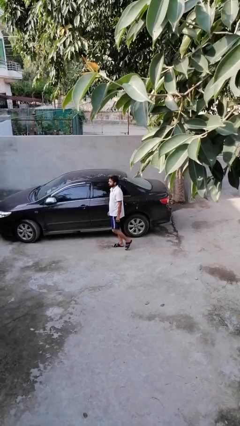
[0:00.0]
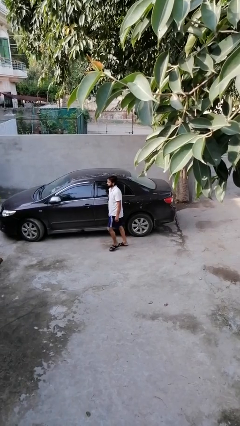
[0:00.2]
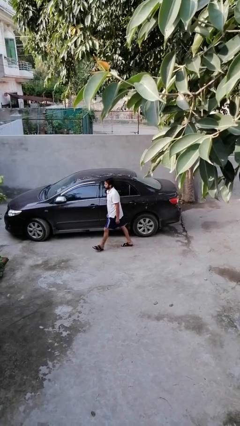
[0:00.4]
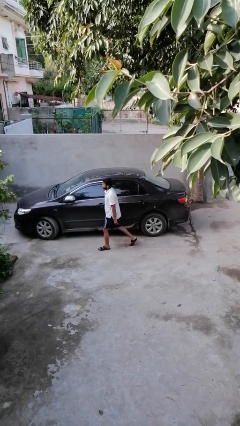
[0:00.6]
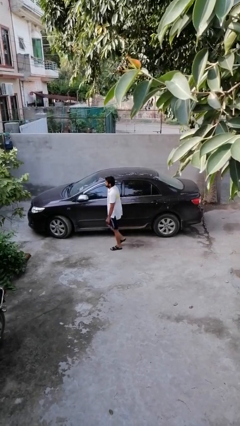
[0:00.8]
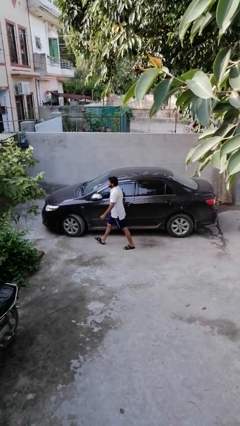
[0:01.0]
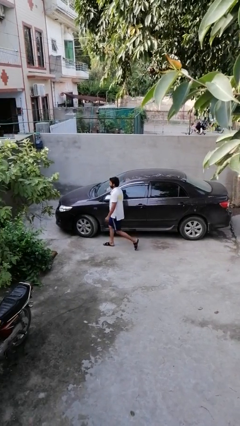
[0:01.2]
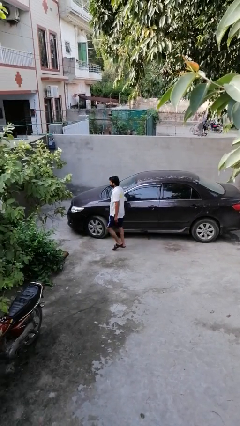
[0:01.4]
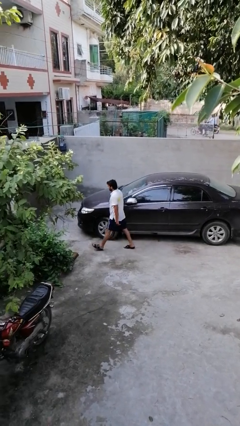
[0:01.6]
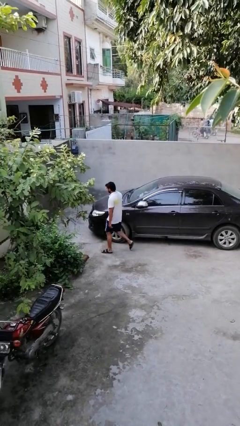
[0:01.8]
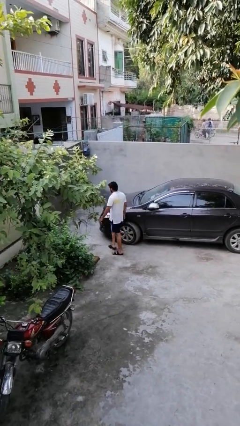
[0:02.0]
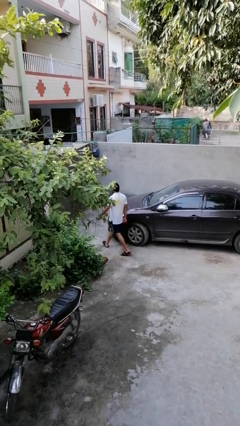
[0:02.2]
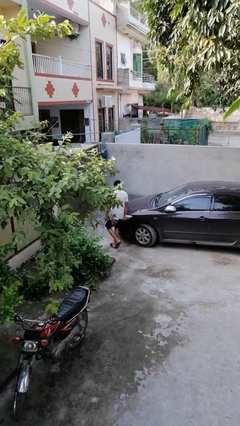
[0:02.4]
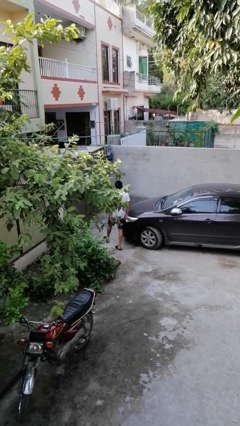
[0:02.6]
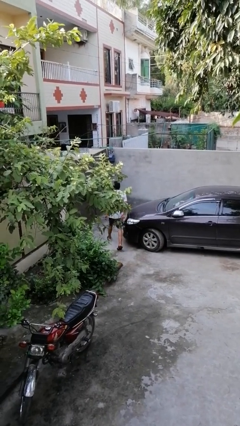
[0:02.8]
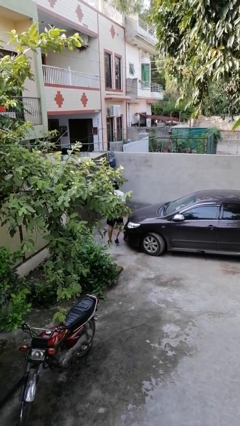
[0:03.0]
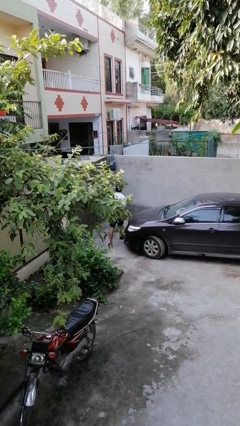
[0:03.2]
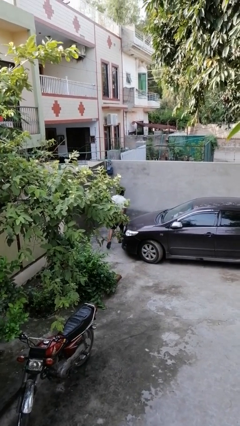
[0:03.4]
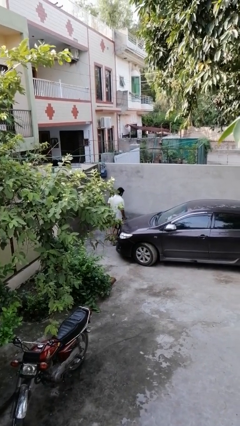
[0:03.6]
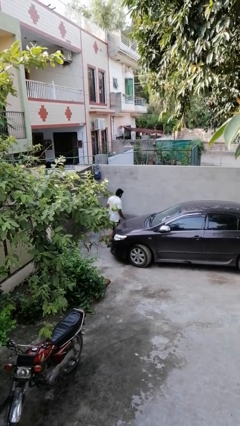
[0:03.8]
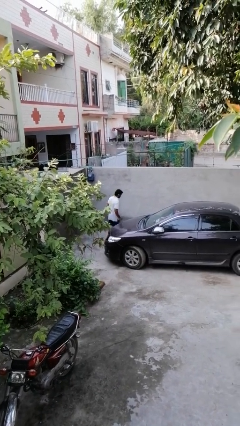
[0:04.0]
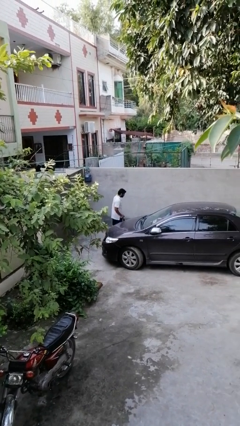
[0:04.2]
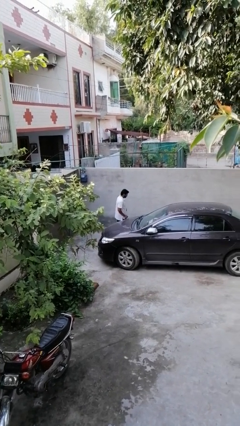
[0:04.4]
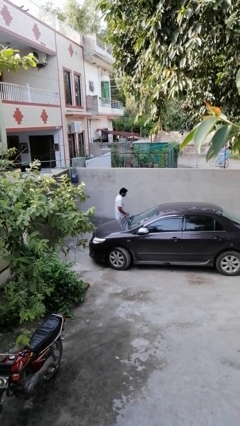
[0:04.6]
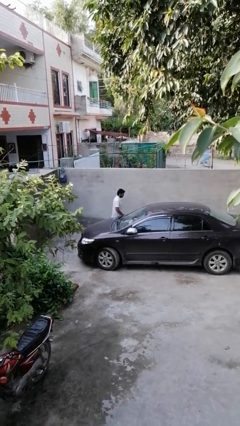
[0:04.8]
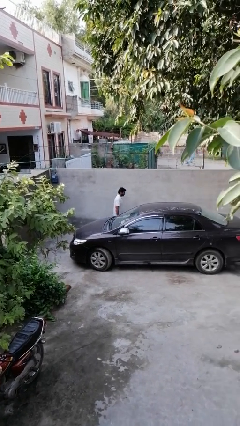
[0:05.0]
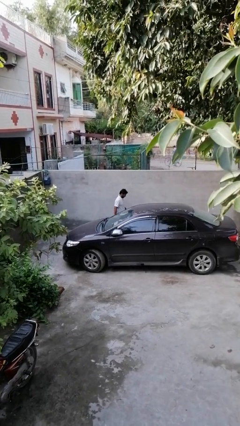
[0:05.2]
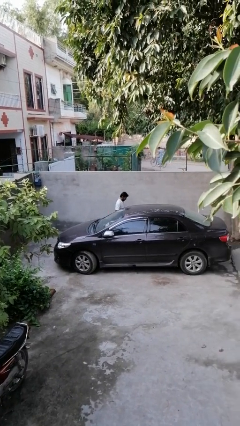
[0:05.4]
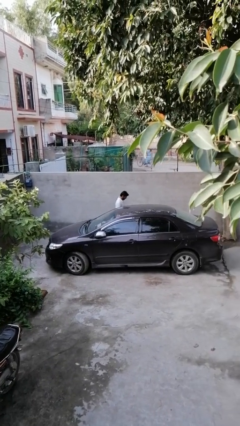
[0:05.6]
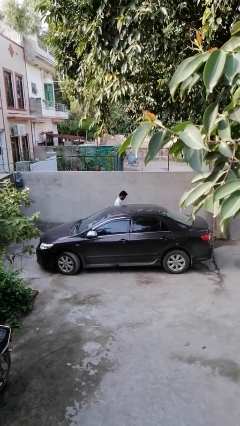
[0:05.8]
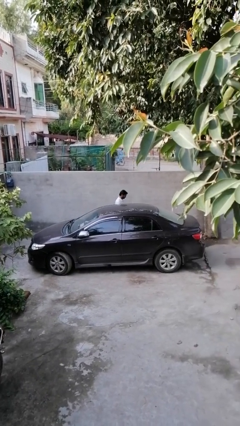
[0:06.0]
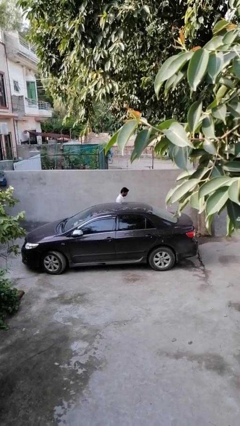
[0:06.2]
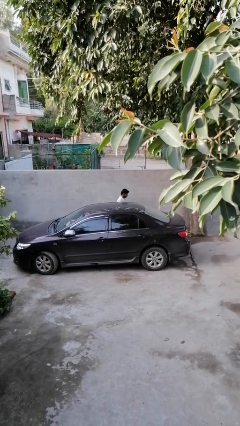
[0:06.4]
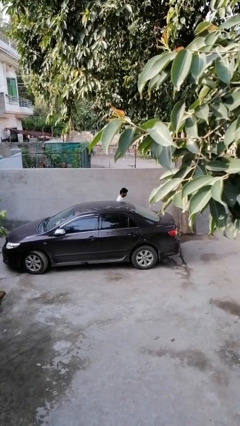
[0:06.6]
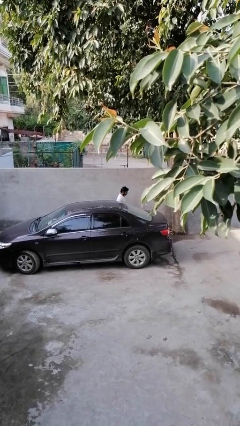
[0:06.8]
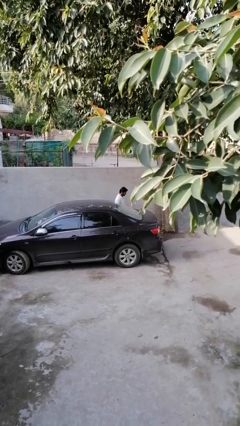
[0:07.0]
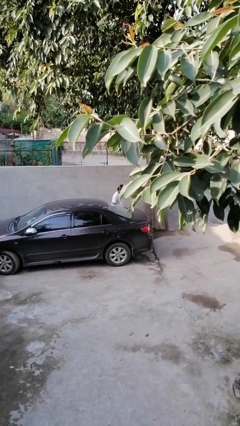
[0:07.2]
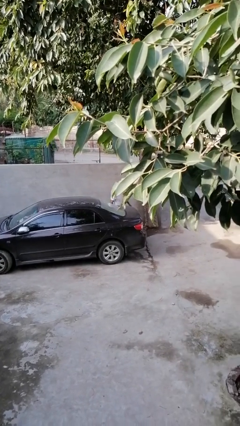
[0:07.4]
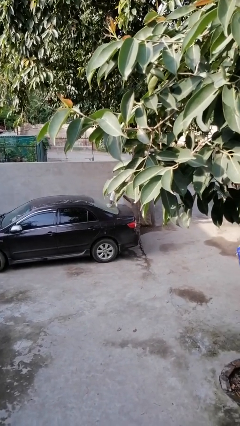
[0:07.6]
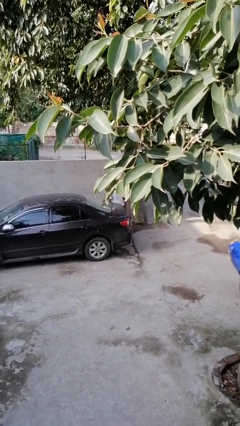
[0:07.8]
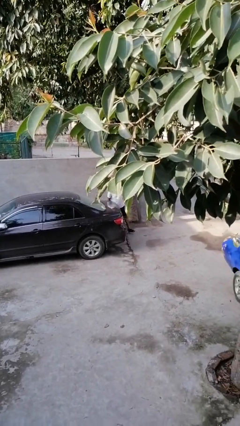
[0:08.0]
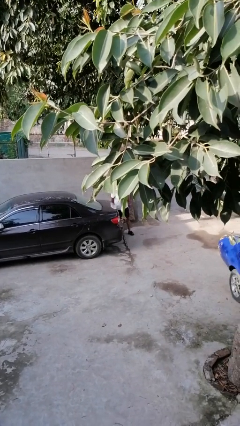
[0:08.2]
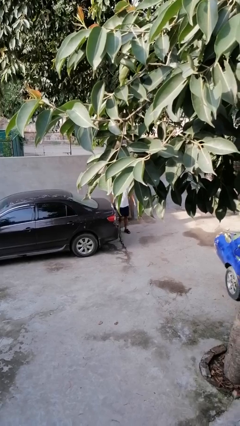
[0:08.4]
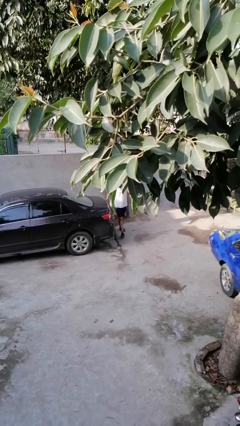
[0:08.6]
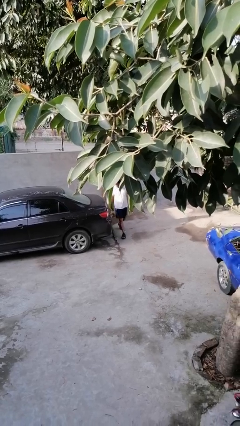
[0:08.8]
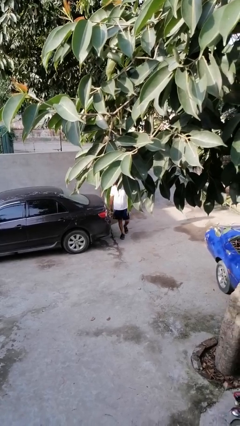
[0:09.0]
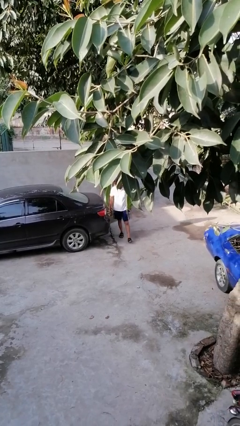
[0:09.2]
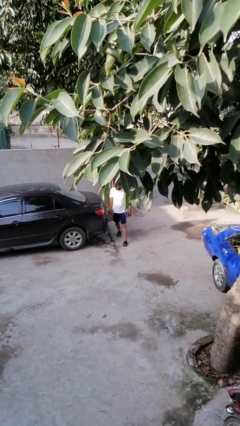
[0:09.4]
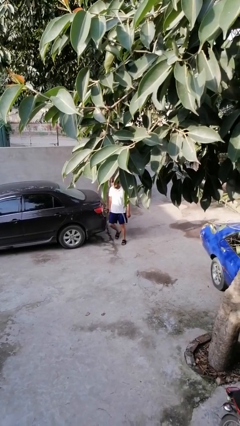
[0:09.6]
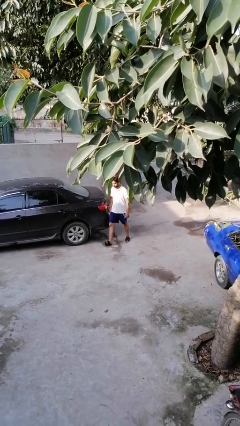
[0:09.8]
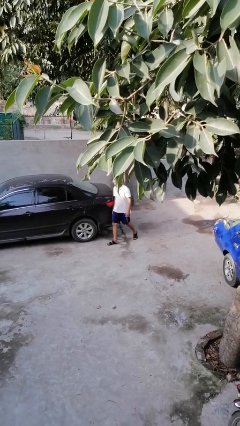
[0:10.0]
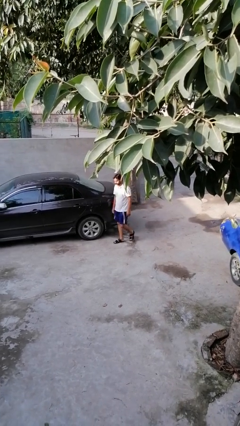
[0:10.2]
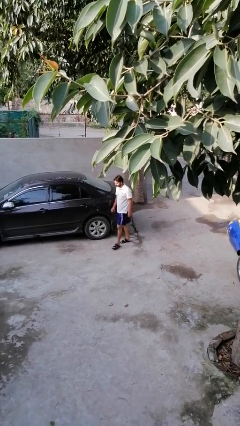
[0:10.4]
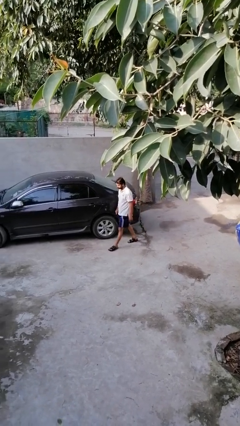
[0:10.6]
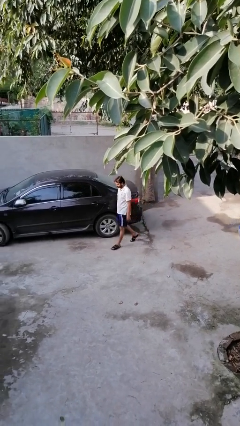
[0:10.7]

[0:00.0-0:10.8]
person walks around car

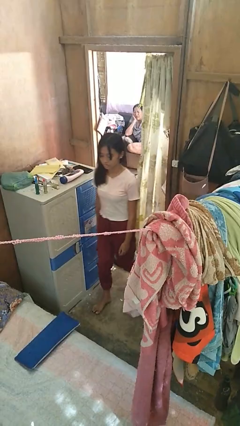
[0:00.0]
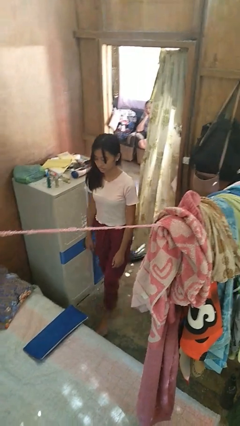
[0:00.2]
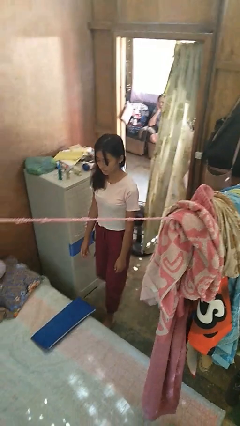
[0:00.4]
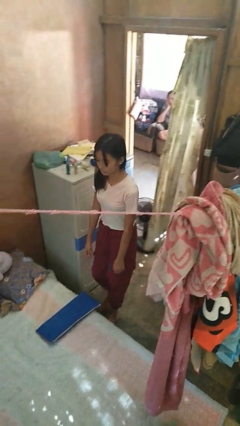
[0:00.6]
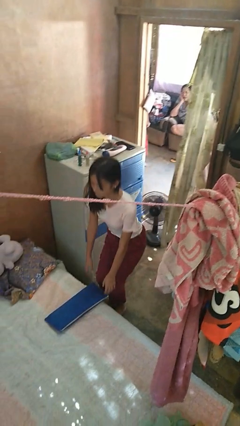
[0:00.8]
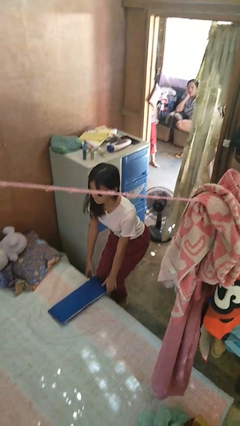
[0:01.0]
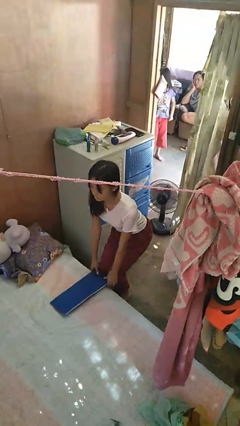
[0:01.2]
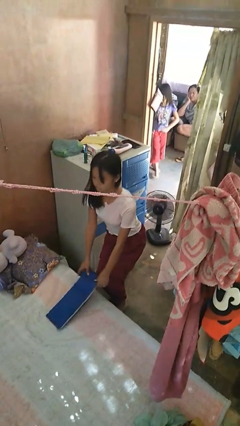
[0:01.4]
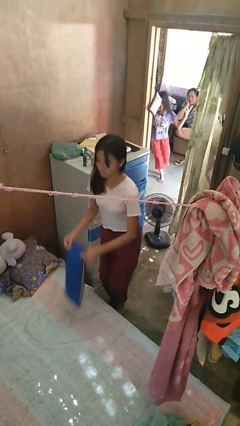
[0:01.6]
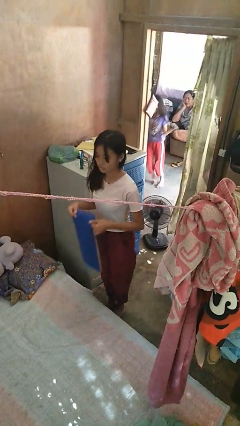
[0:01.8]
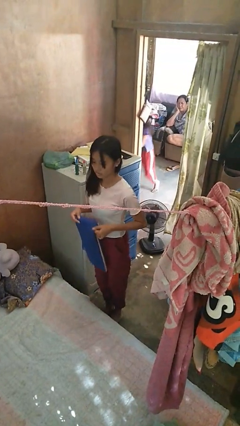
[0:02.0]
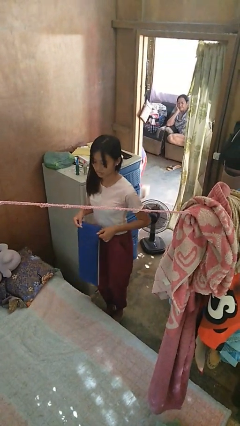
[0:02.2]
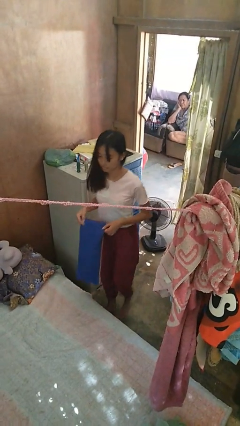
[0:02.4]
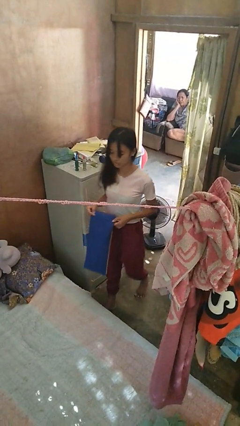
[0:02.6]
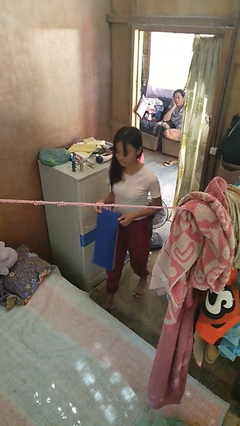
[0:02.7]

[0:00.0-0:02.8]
person picks up object from bed

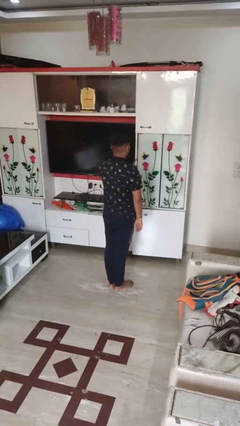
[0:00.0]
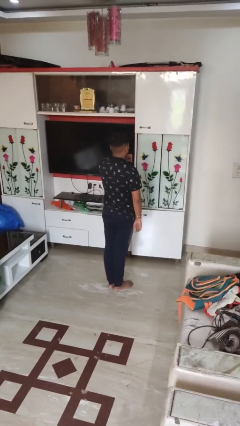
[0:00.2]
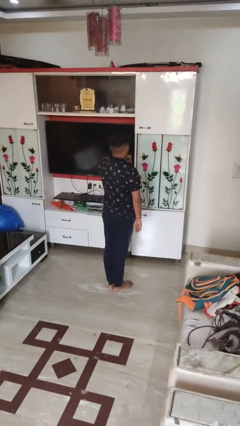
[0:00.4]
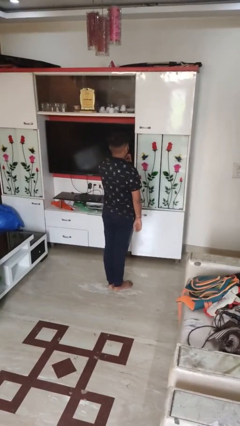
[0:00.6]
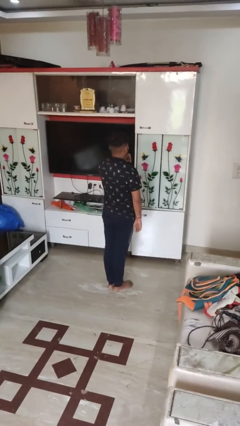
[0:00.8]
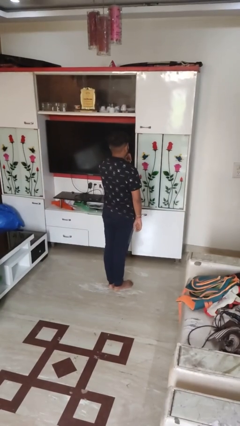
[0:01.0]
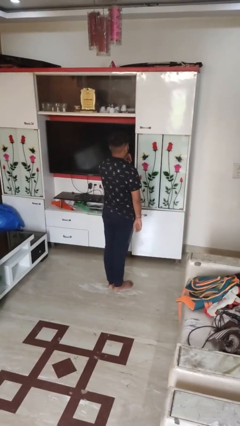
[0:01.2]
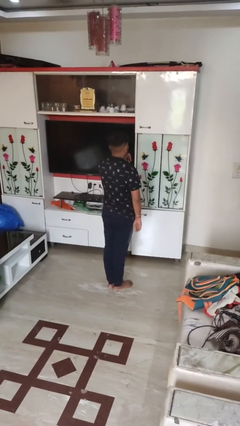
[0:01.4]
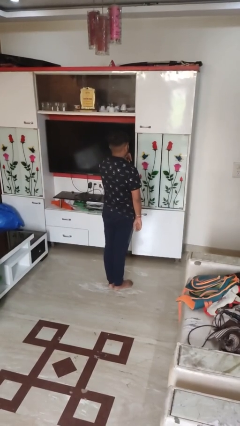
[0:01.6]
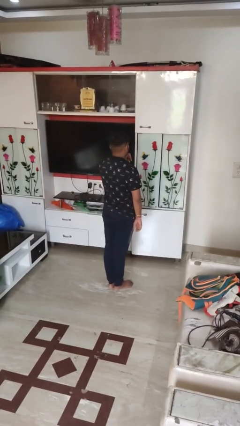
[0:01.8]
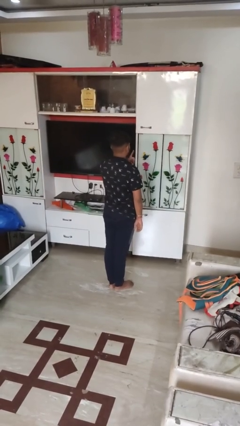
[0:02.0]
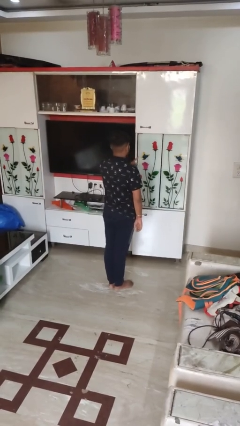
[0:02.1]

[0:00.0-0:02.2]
person gestures be quiet

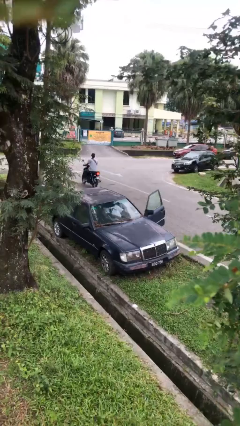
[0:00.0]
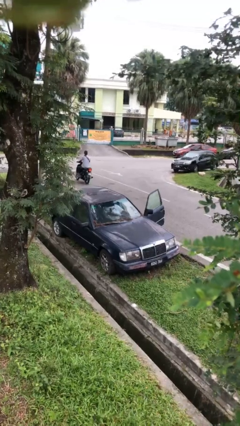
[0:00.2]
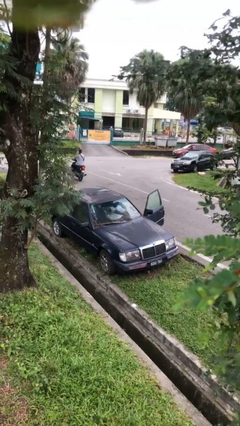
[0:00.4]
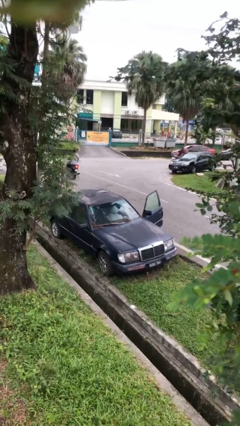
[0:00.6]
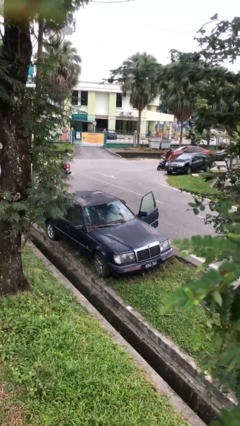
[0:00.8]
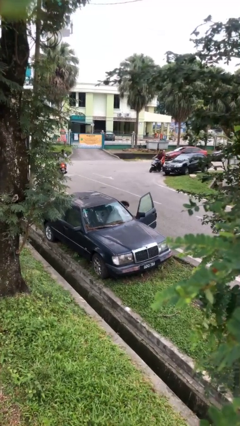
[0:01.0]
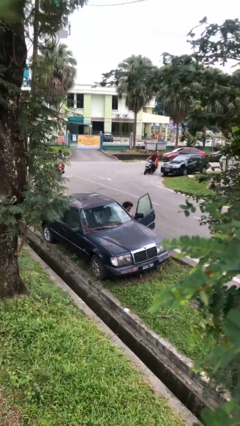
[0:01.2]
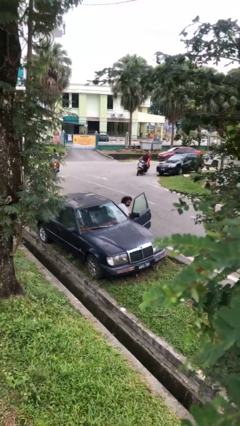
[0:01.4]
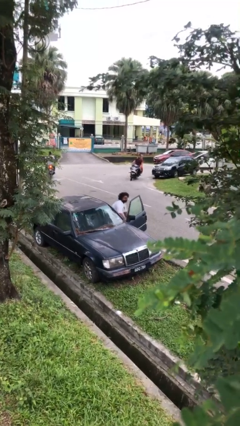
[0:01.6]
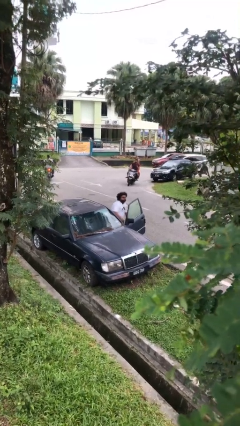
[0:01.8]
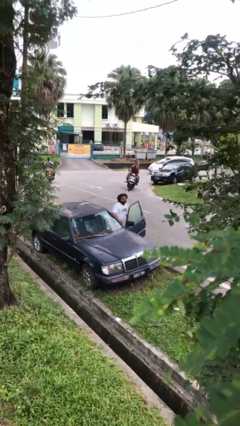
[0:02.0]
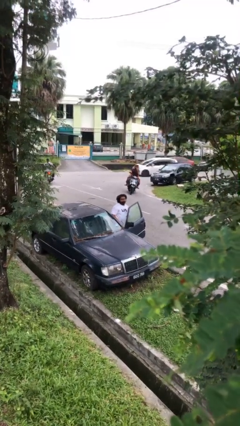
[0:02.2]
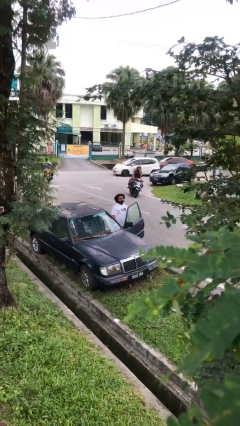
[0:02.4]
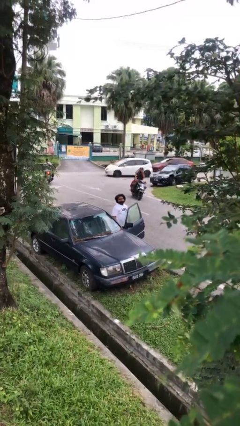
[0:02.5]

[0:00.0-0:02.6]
person exits car
